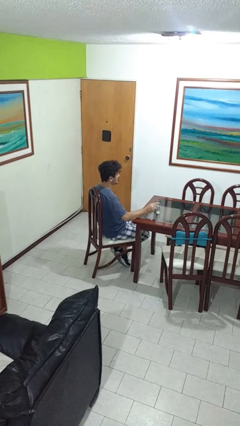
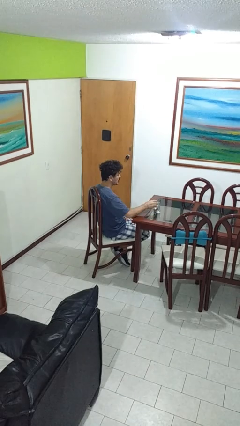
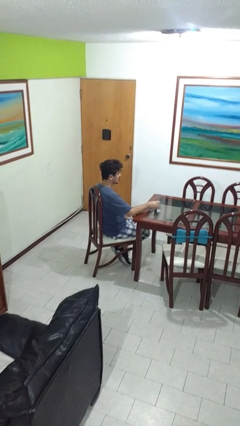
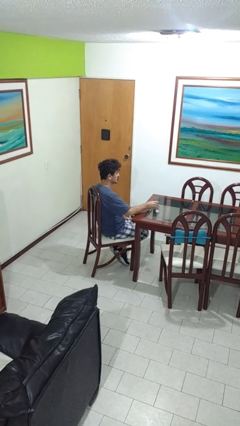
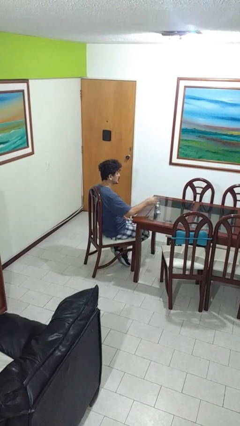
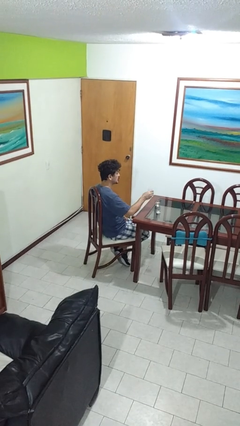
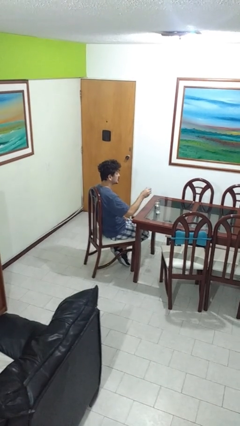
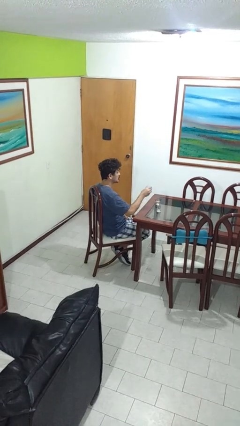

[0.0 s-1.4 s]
person picks up object from table

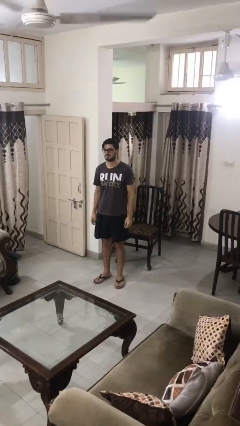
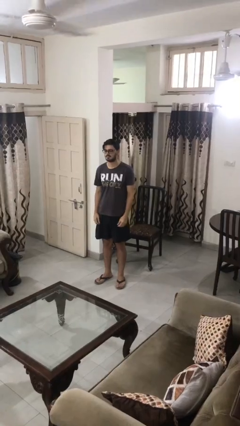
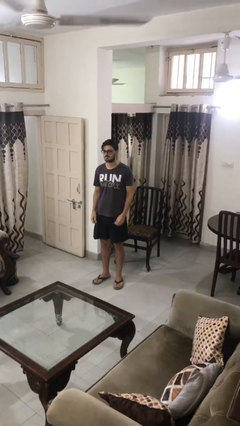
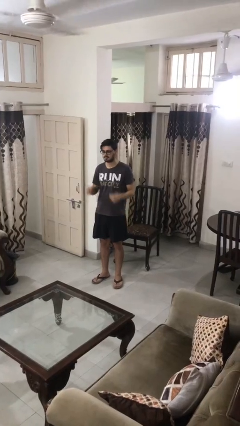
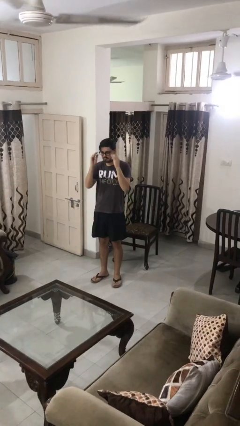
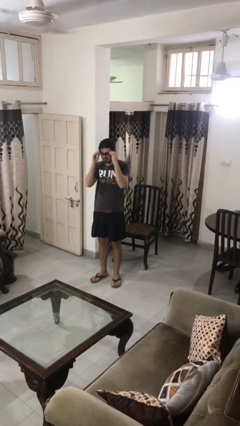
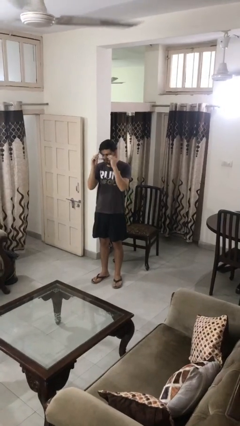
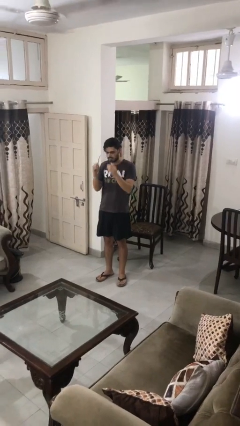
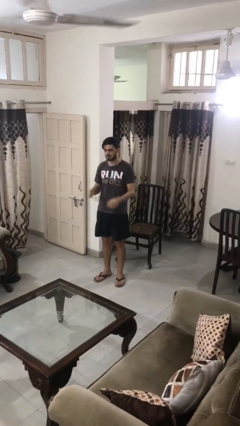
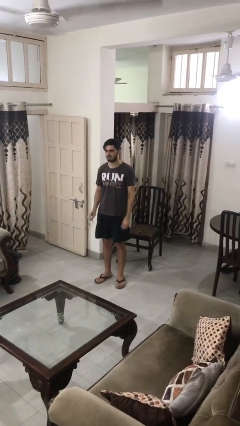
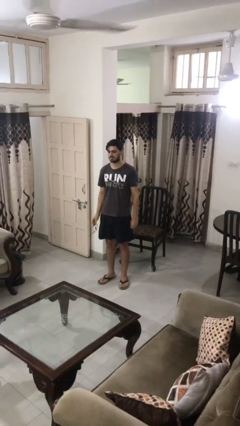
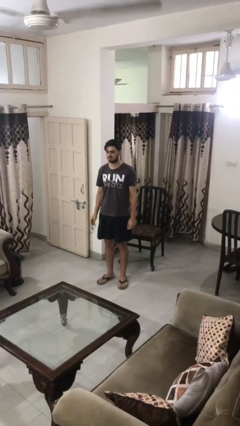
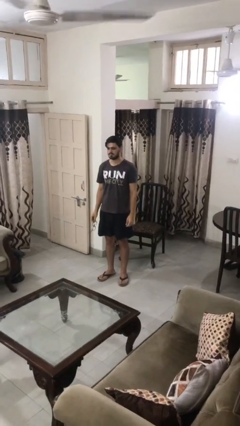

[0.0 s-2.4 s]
person takes off glasses

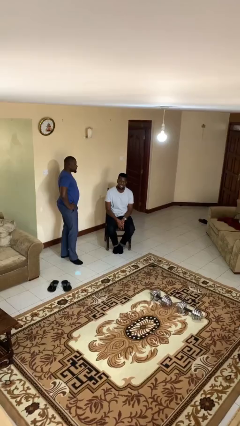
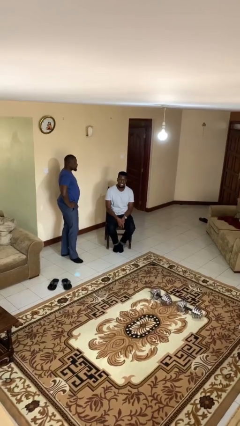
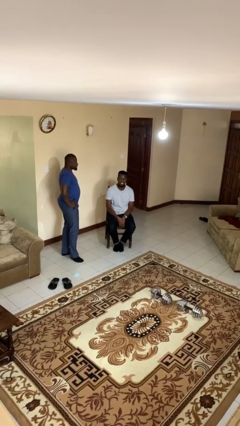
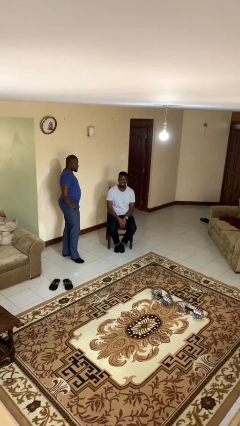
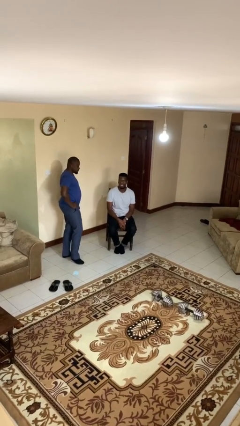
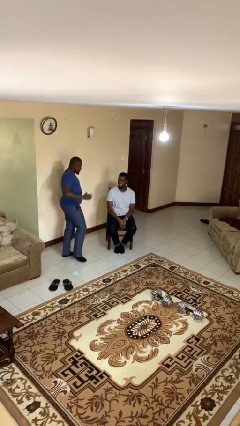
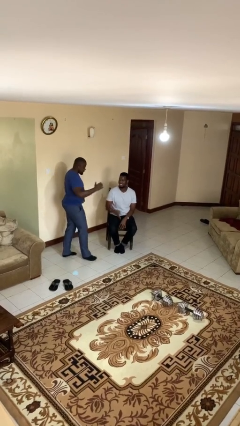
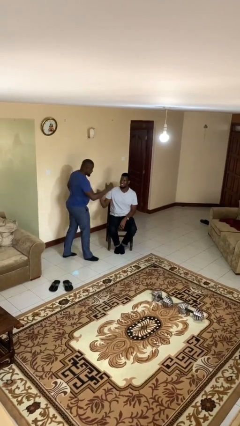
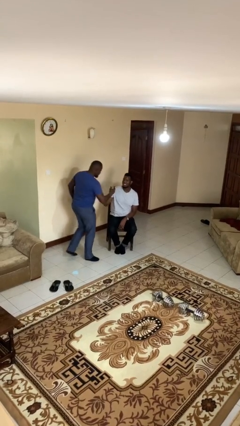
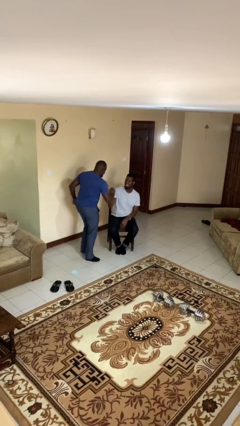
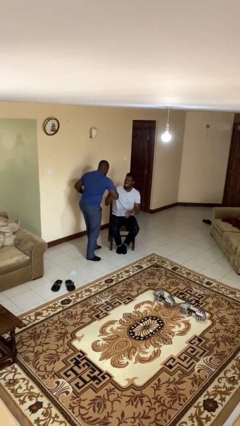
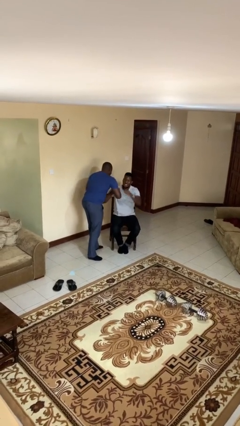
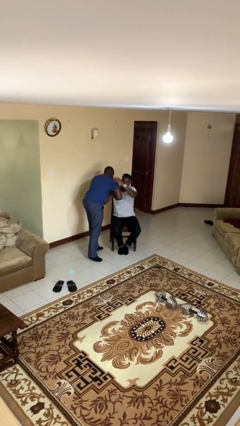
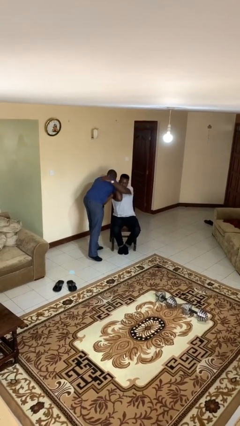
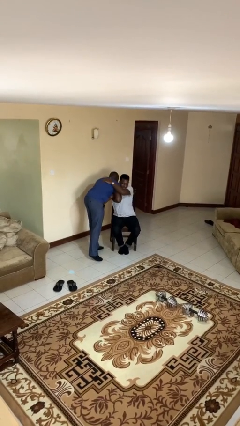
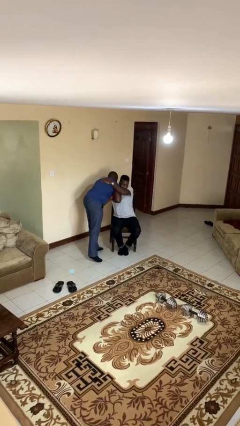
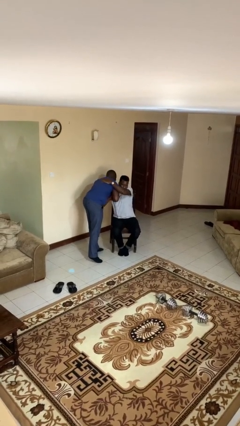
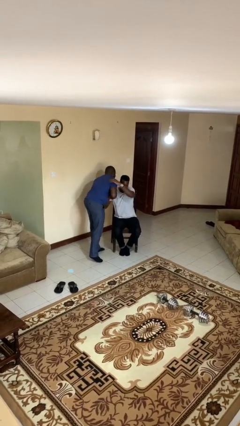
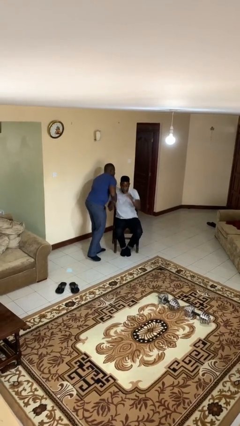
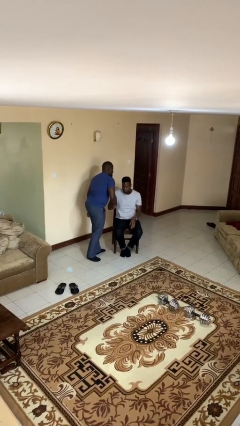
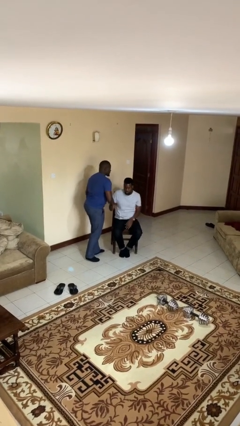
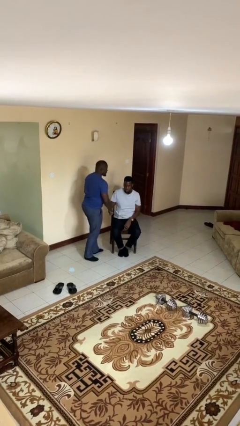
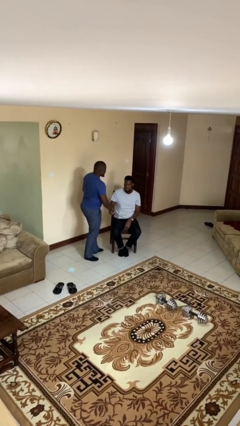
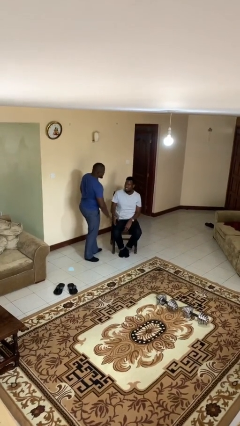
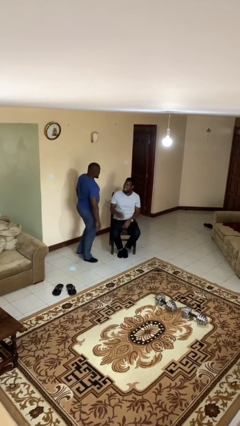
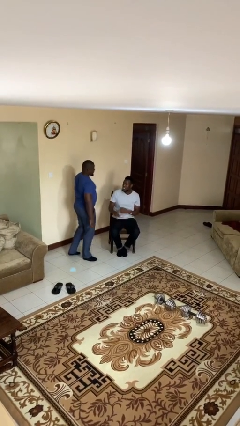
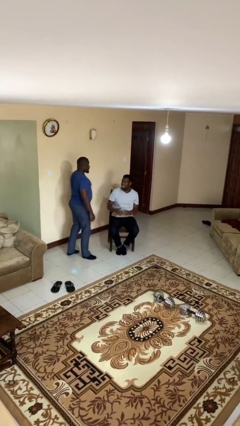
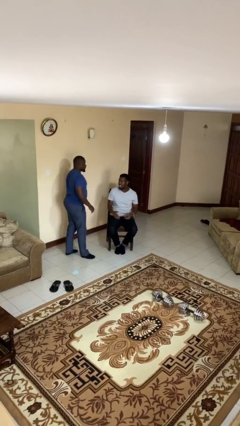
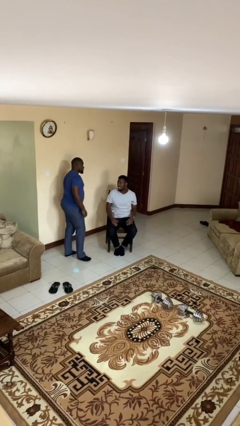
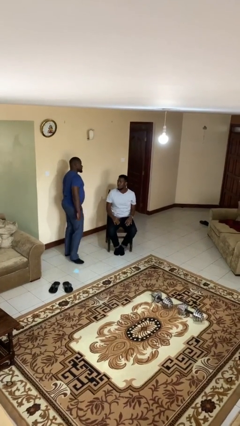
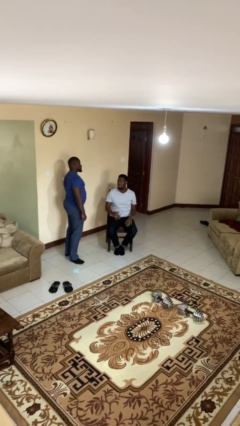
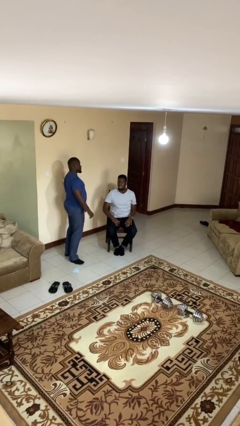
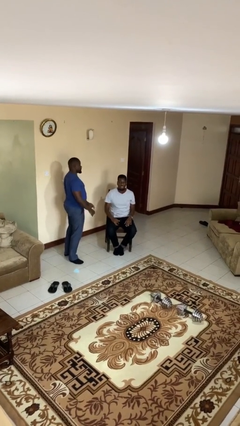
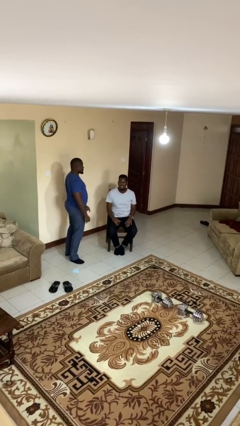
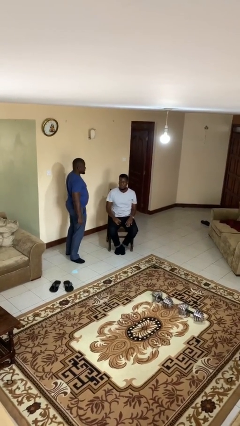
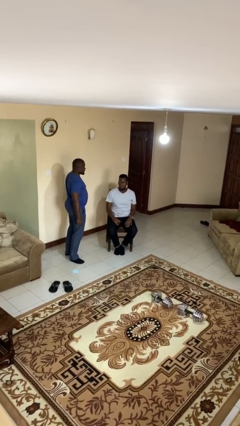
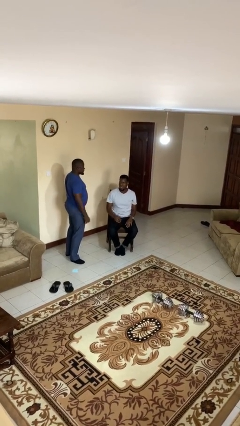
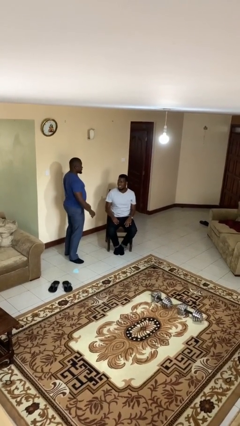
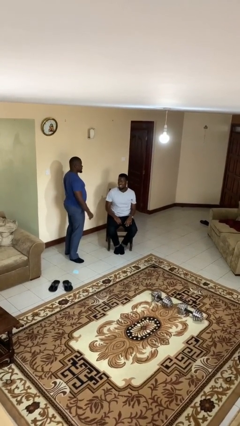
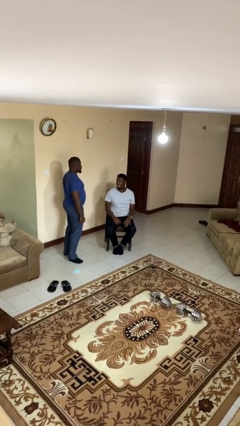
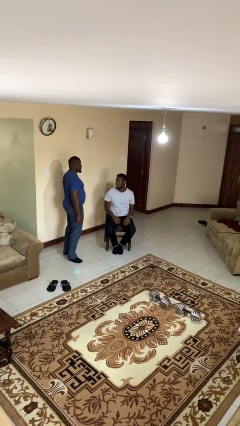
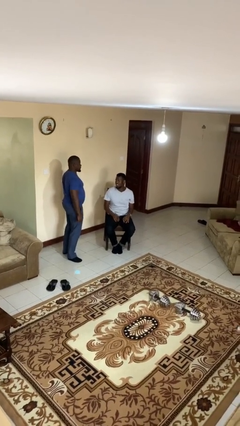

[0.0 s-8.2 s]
person embraces person

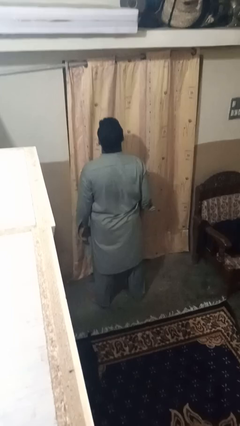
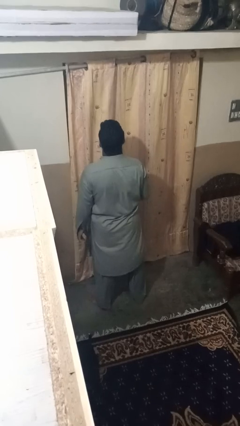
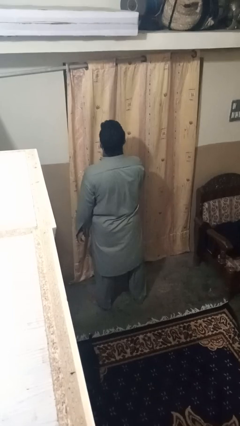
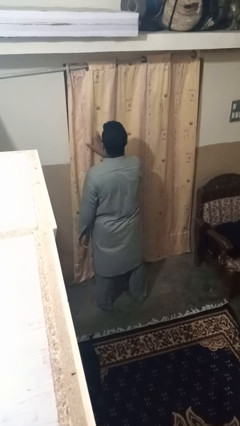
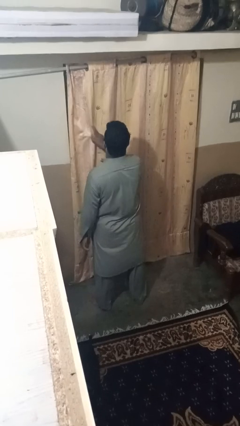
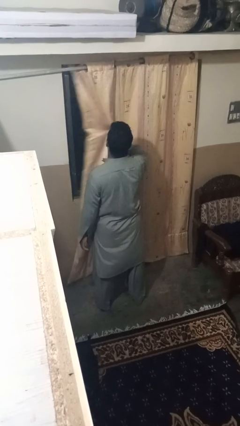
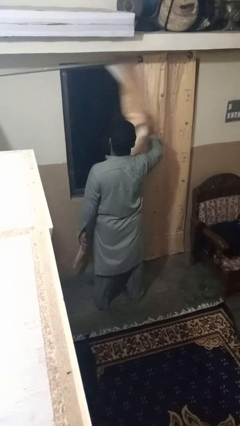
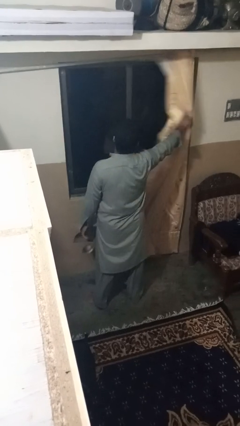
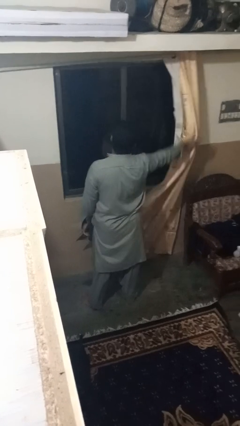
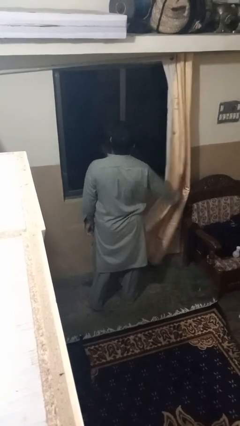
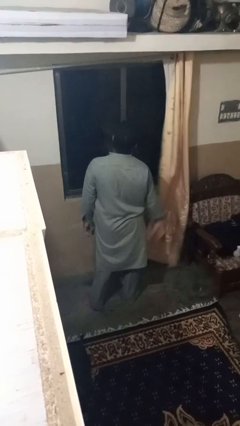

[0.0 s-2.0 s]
person opens curtains

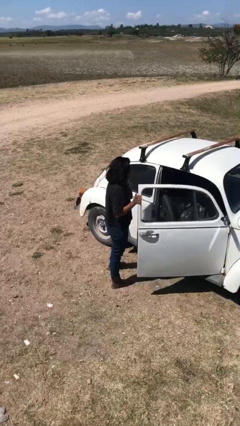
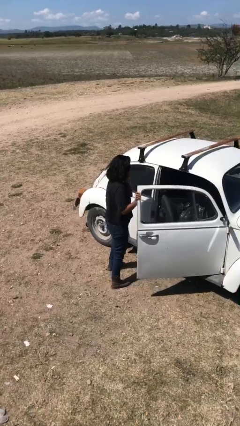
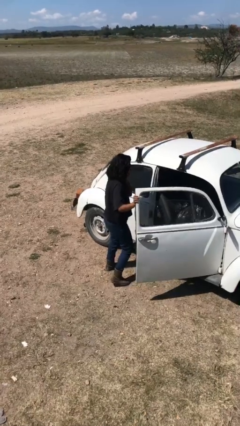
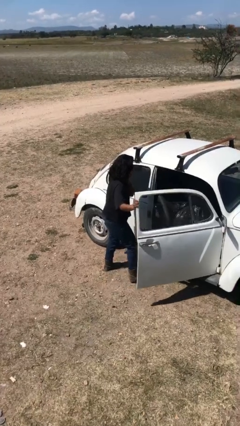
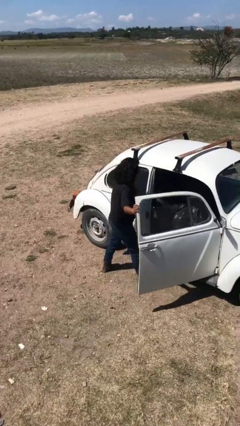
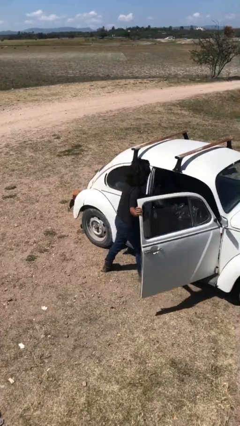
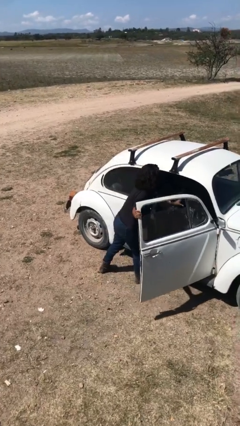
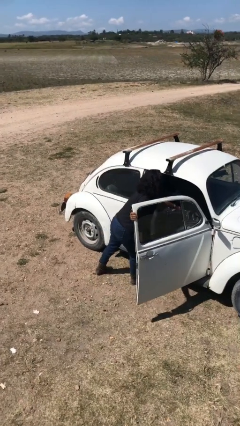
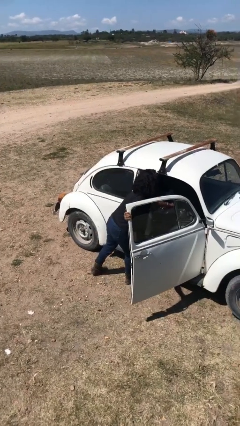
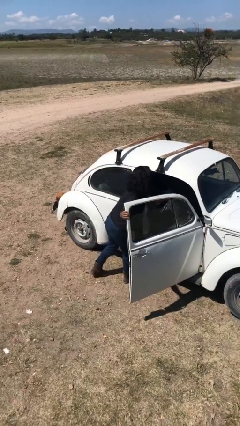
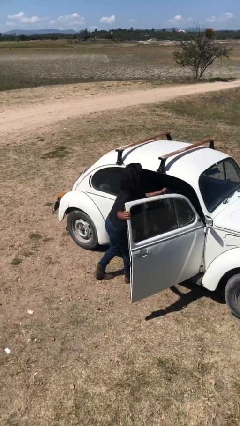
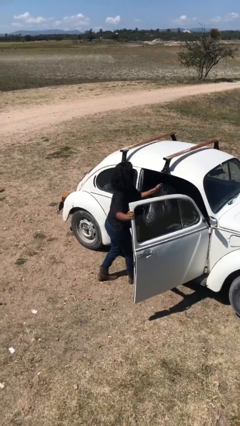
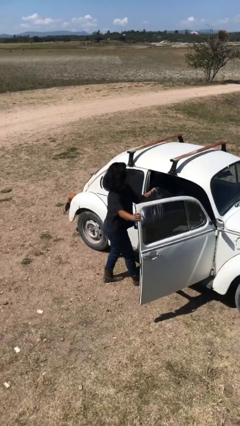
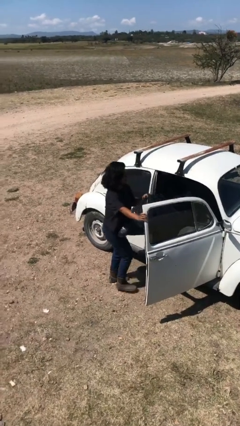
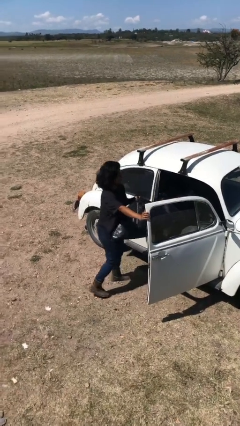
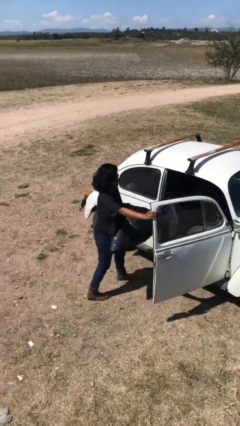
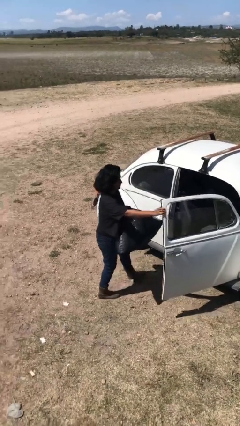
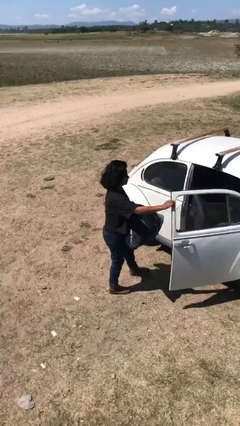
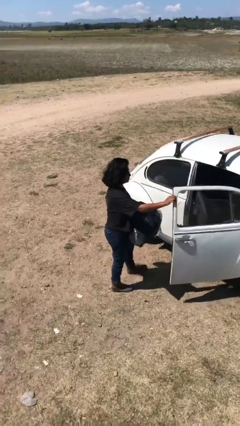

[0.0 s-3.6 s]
person unloads car
